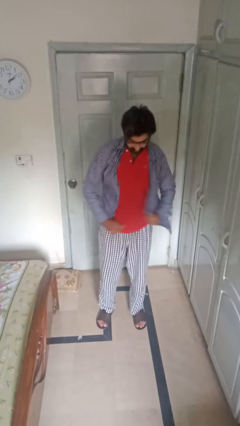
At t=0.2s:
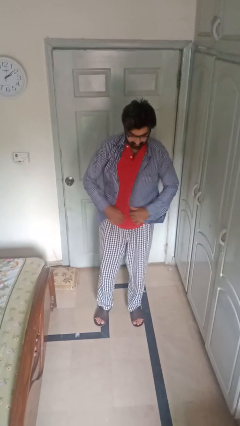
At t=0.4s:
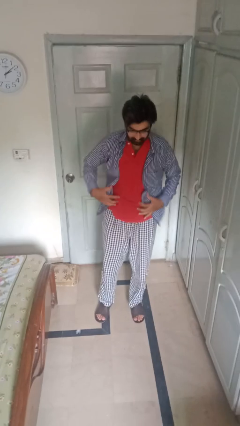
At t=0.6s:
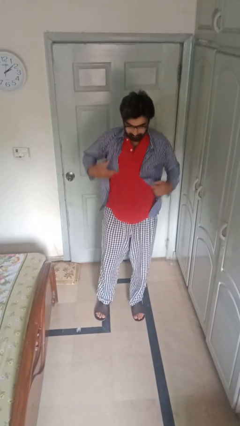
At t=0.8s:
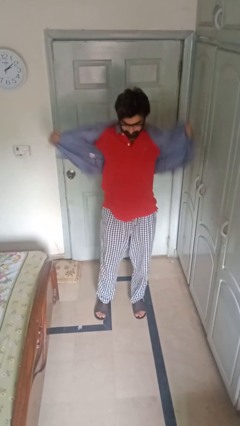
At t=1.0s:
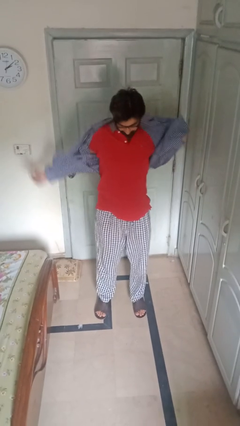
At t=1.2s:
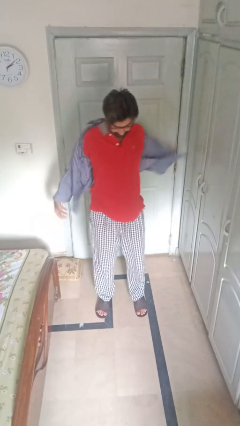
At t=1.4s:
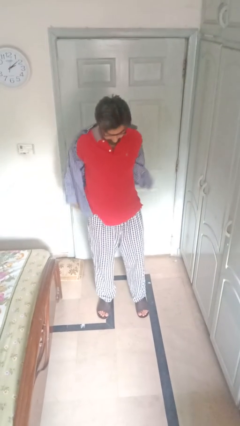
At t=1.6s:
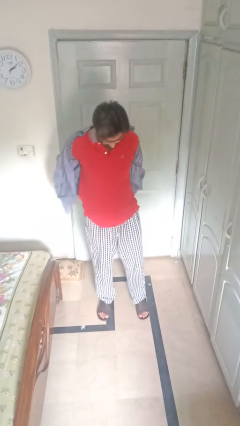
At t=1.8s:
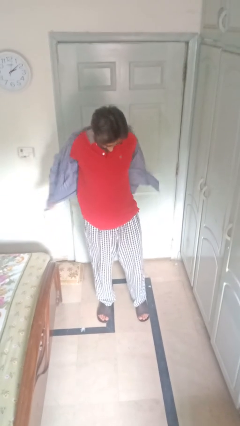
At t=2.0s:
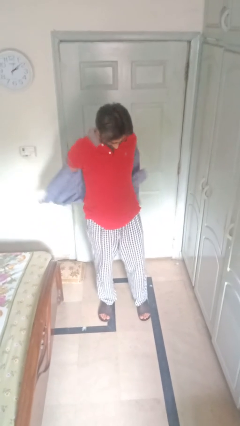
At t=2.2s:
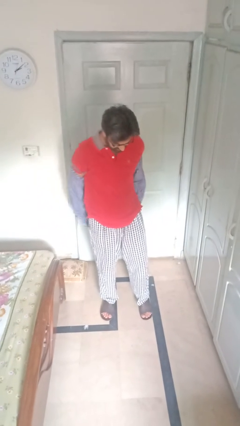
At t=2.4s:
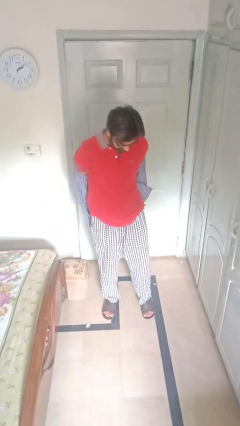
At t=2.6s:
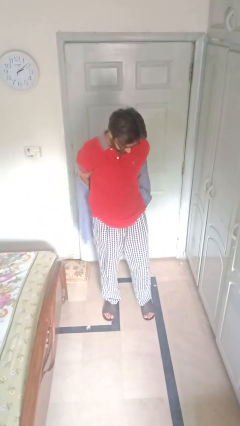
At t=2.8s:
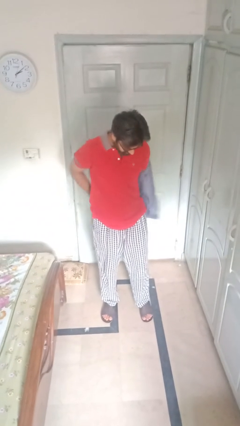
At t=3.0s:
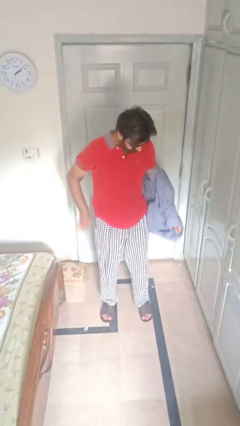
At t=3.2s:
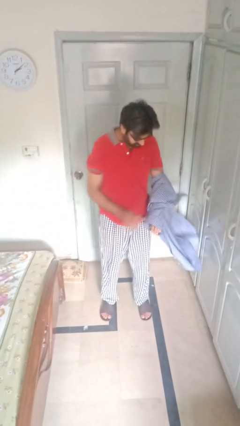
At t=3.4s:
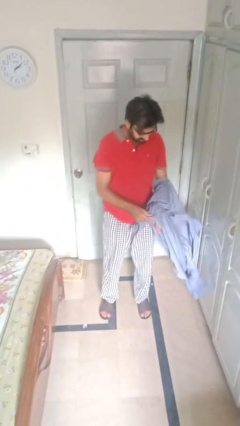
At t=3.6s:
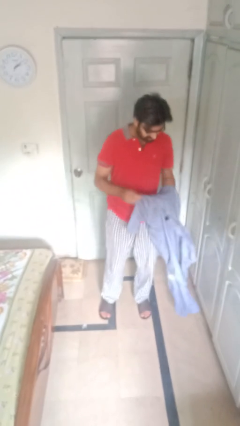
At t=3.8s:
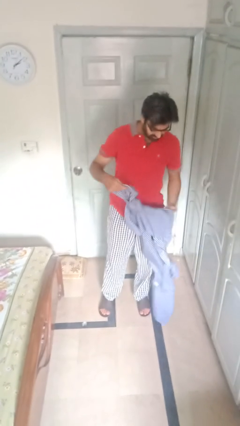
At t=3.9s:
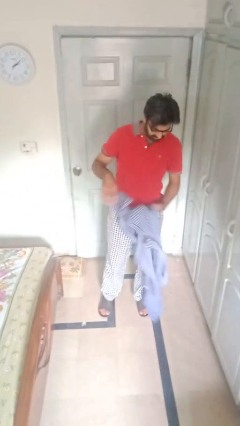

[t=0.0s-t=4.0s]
person takes off shirt

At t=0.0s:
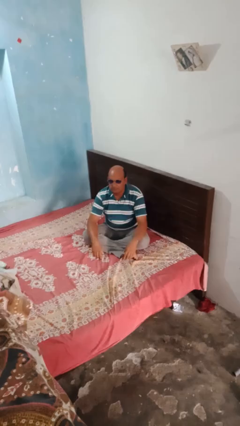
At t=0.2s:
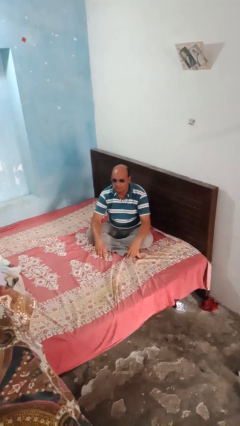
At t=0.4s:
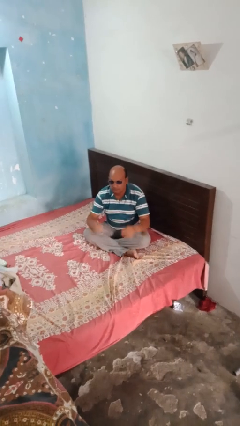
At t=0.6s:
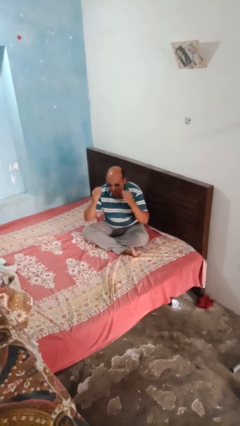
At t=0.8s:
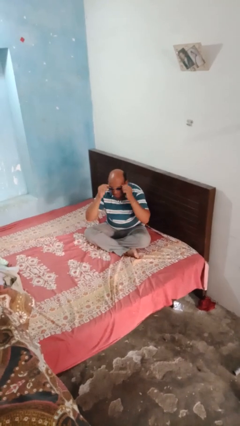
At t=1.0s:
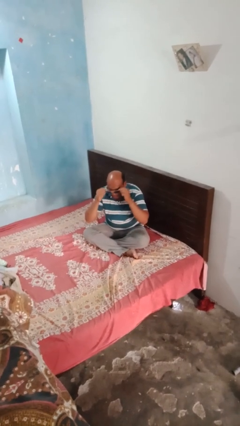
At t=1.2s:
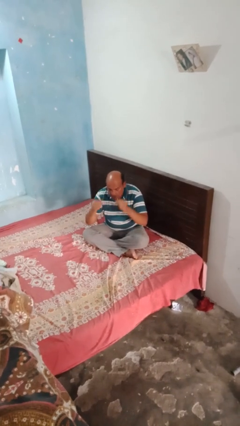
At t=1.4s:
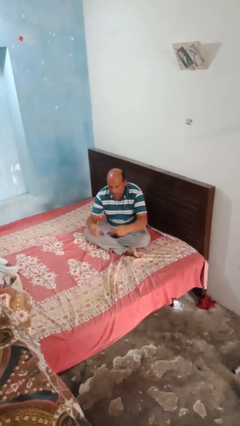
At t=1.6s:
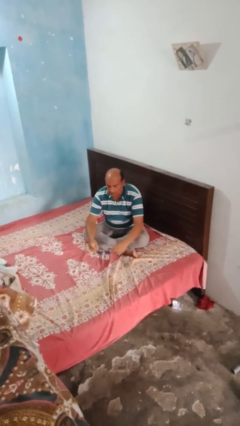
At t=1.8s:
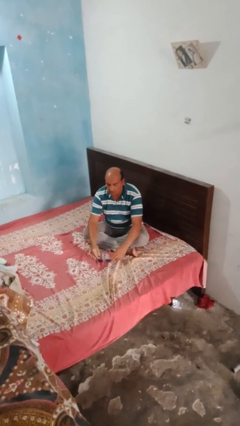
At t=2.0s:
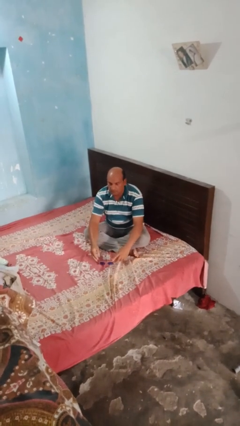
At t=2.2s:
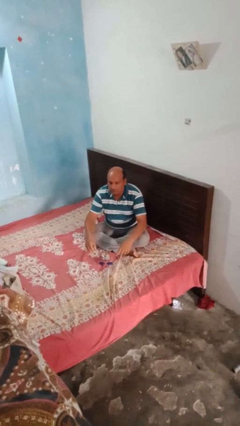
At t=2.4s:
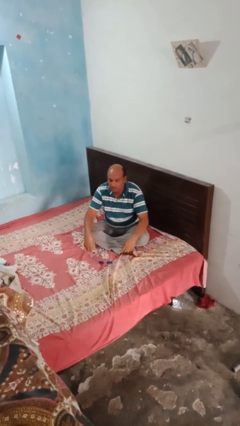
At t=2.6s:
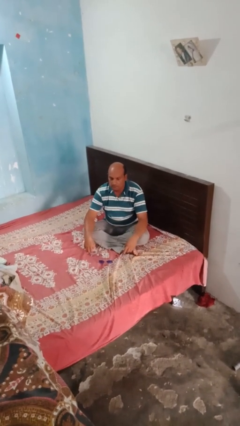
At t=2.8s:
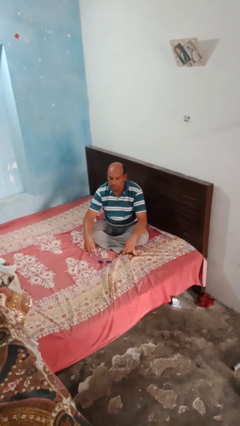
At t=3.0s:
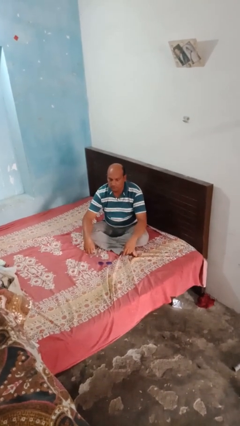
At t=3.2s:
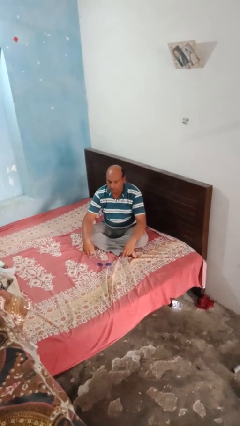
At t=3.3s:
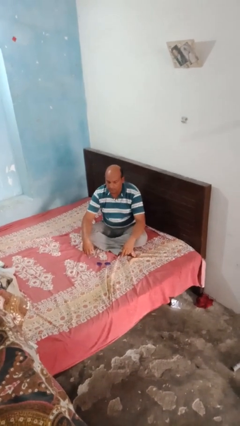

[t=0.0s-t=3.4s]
person takes off sunglasses

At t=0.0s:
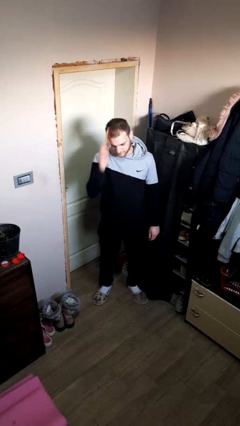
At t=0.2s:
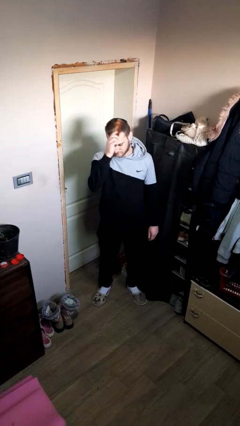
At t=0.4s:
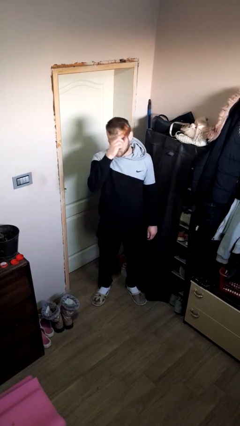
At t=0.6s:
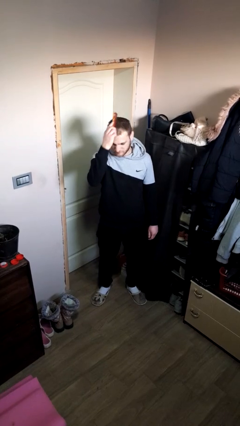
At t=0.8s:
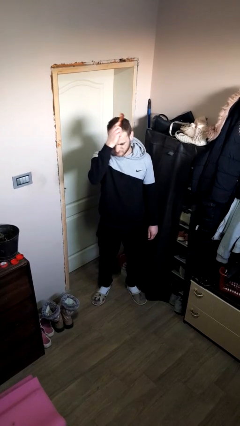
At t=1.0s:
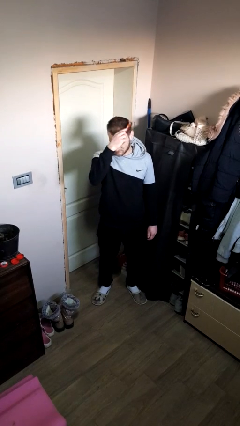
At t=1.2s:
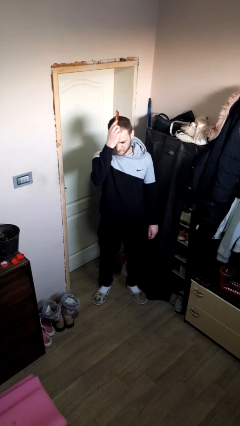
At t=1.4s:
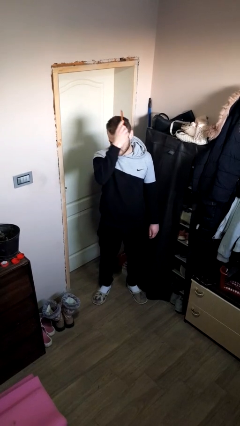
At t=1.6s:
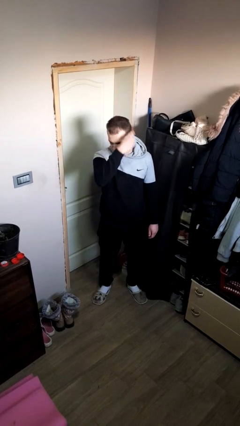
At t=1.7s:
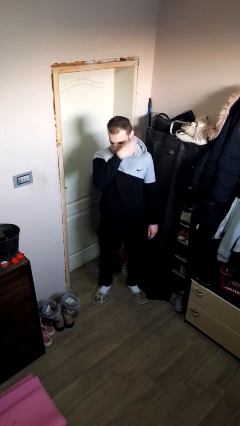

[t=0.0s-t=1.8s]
person brushes hair

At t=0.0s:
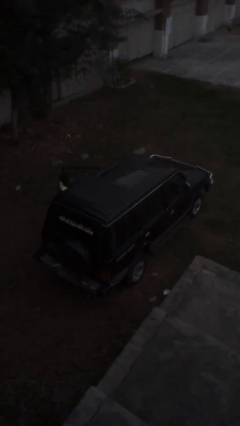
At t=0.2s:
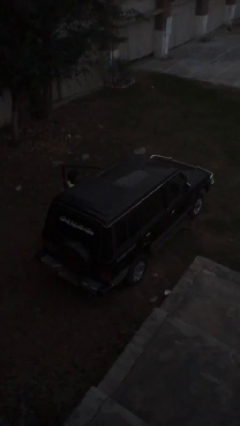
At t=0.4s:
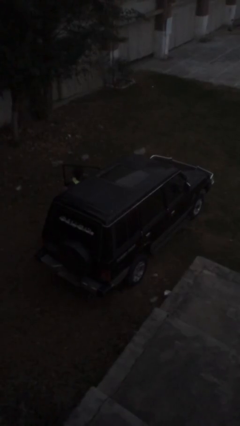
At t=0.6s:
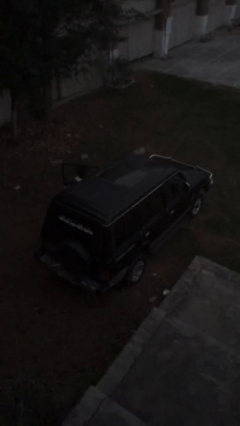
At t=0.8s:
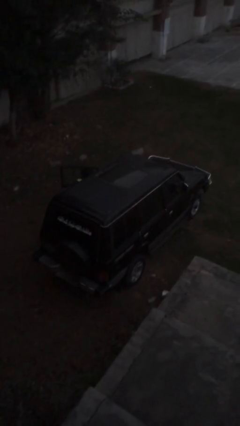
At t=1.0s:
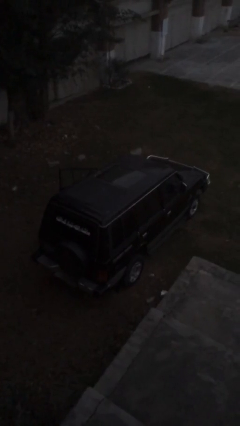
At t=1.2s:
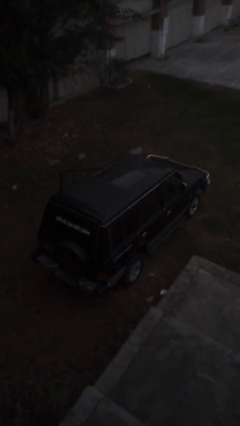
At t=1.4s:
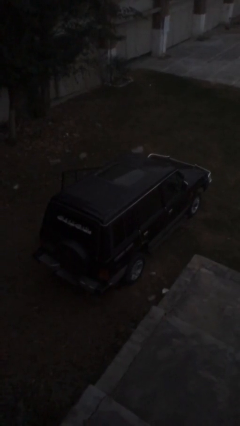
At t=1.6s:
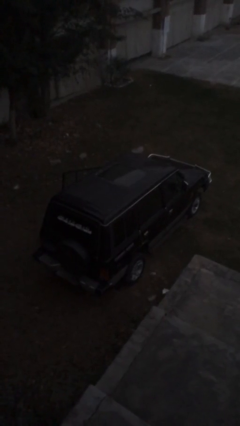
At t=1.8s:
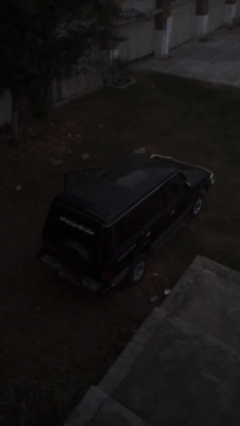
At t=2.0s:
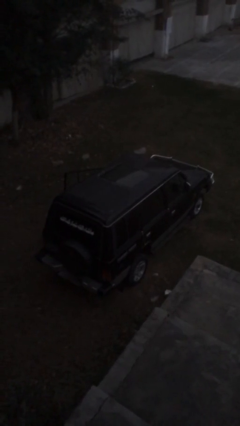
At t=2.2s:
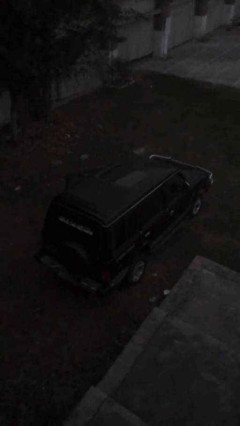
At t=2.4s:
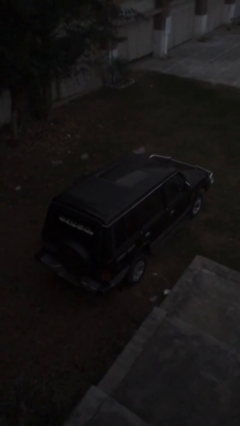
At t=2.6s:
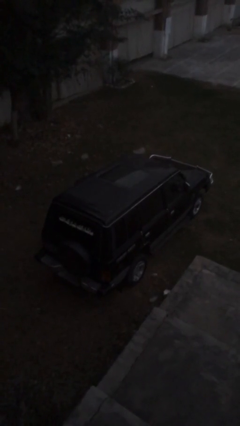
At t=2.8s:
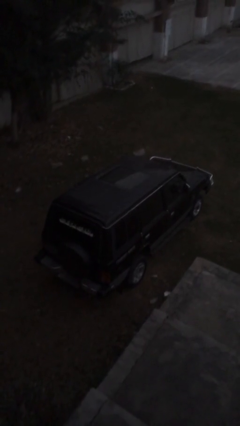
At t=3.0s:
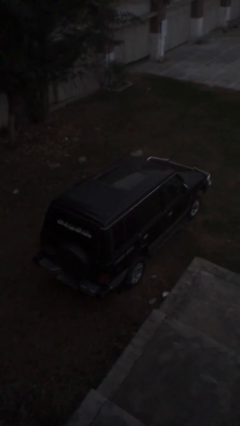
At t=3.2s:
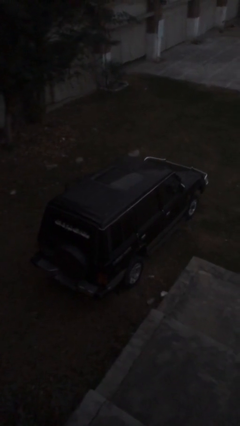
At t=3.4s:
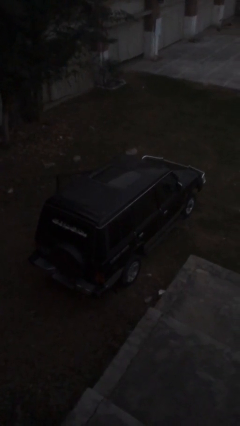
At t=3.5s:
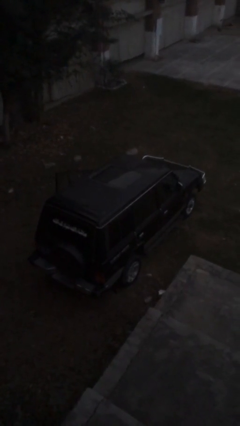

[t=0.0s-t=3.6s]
car picks up person

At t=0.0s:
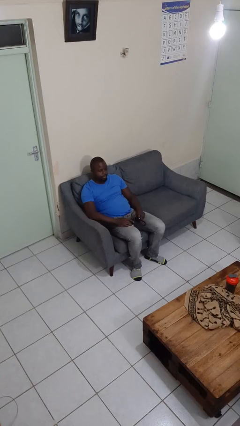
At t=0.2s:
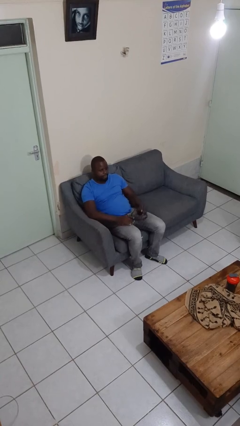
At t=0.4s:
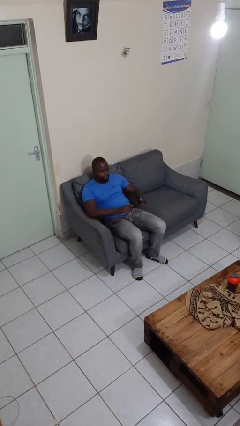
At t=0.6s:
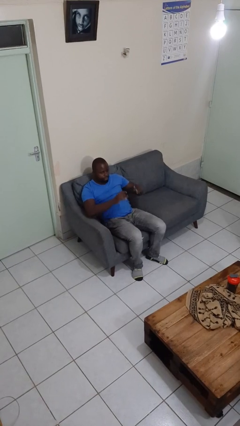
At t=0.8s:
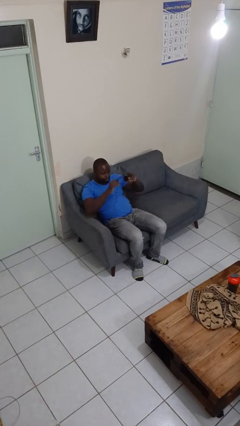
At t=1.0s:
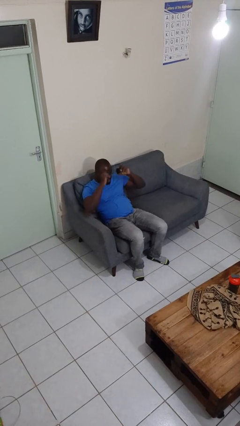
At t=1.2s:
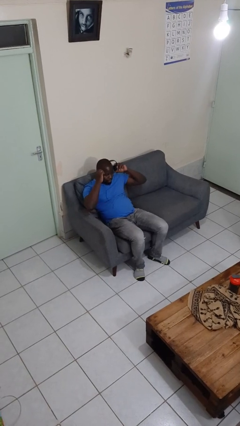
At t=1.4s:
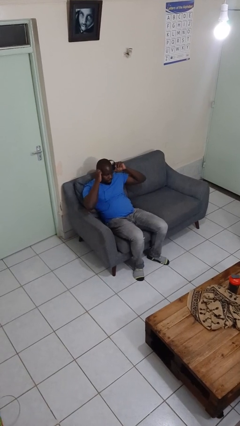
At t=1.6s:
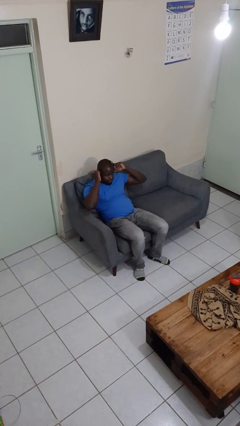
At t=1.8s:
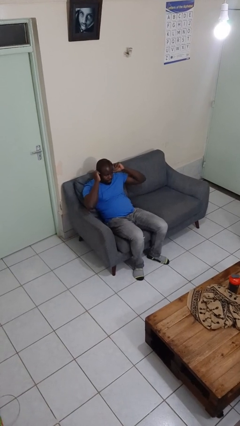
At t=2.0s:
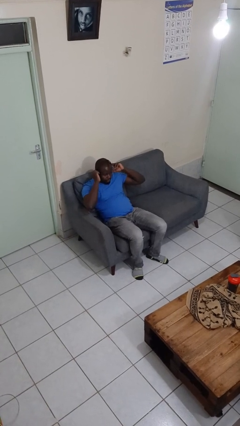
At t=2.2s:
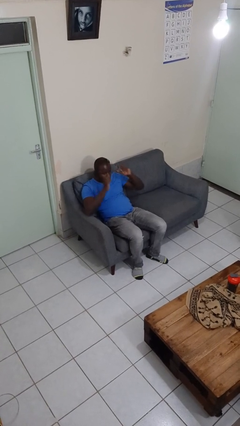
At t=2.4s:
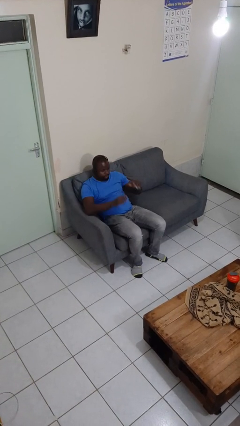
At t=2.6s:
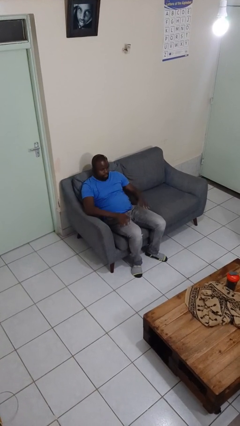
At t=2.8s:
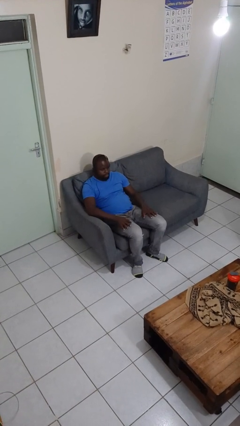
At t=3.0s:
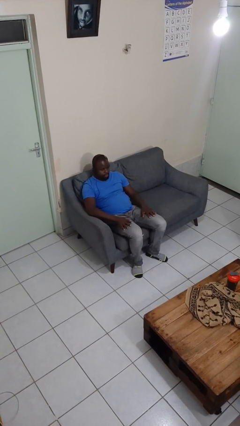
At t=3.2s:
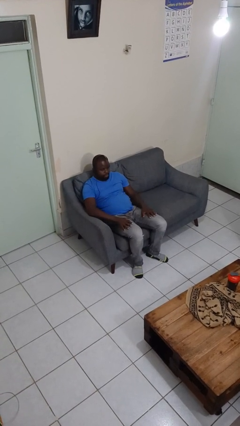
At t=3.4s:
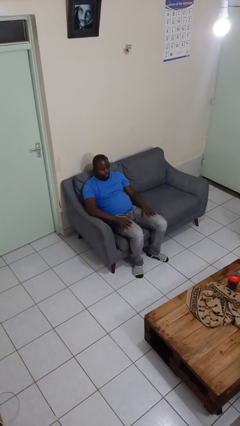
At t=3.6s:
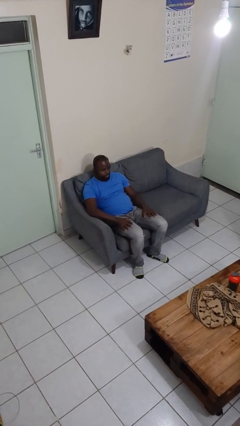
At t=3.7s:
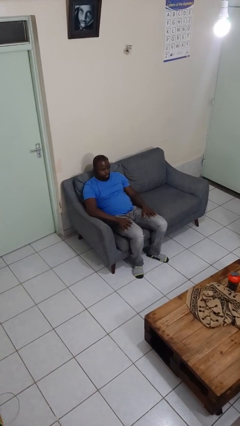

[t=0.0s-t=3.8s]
person puts on headphones

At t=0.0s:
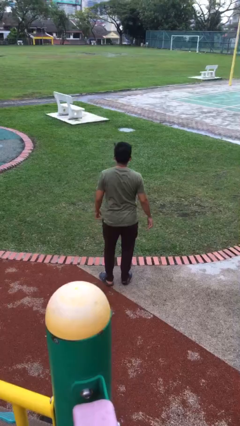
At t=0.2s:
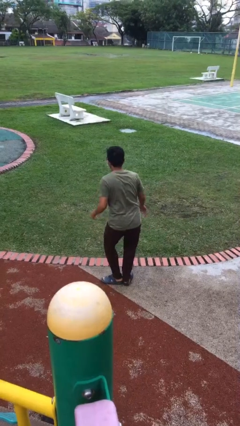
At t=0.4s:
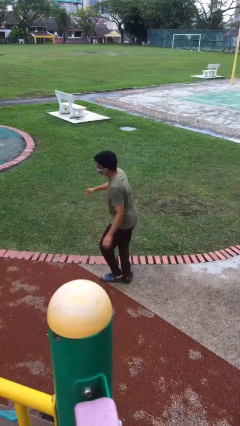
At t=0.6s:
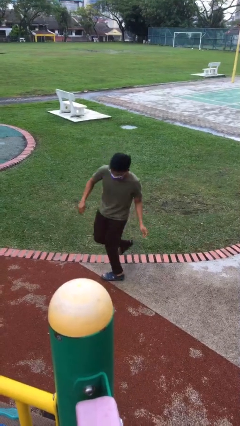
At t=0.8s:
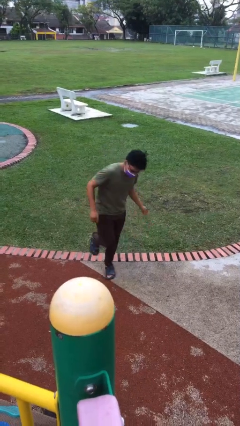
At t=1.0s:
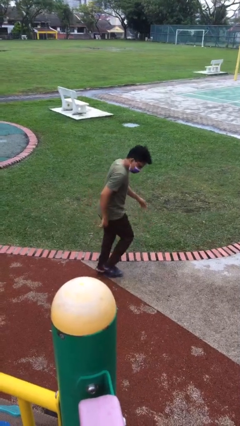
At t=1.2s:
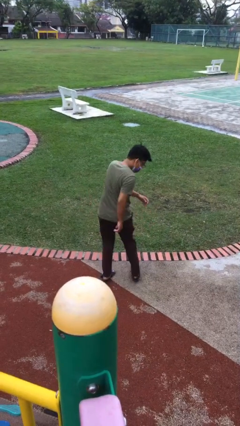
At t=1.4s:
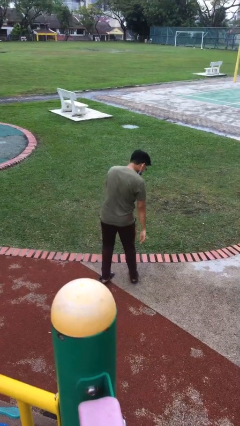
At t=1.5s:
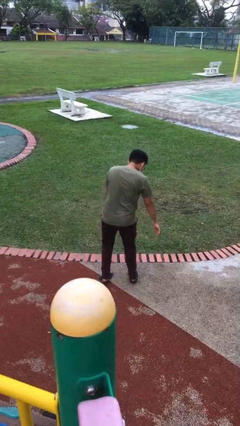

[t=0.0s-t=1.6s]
person twirls
